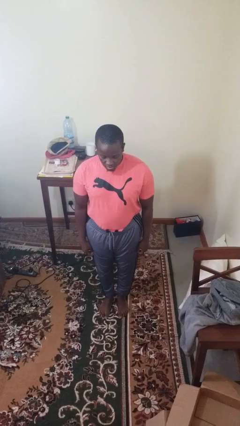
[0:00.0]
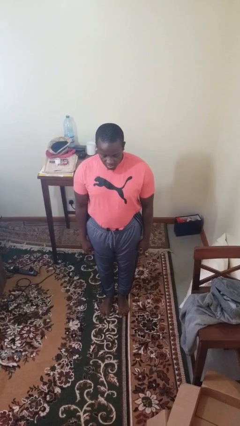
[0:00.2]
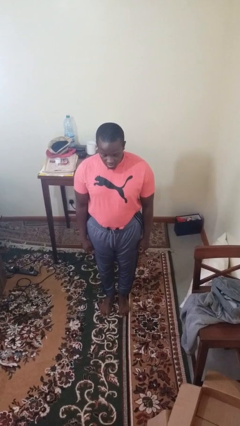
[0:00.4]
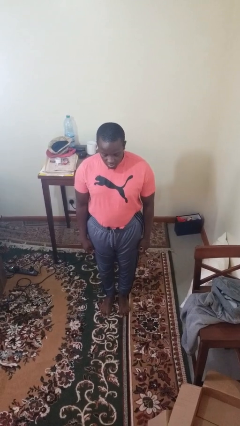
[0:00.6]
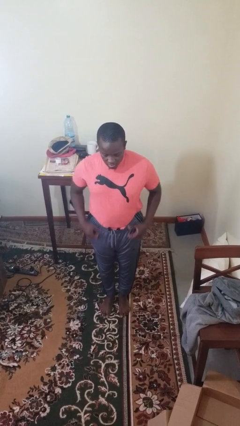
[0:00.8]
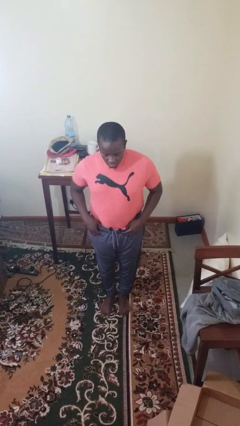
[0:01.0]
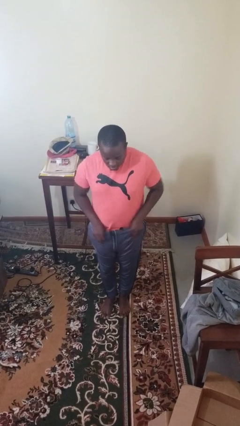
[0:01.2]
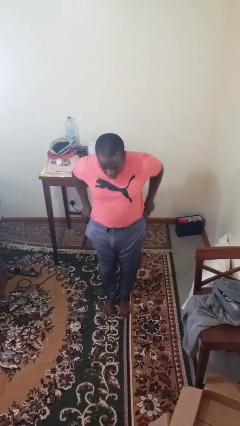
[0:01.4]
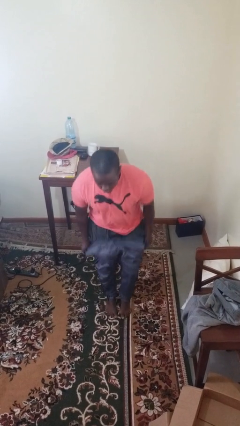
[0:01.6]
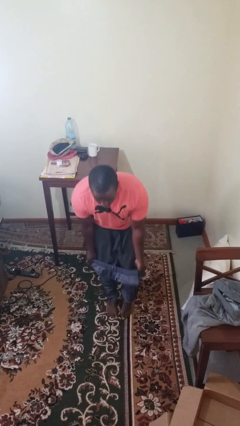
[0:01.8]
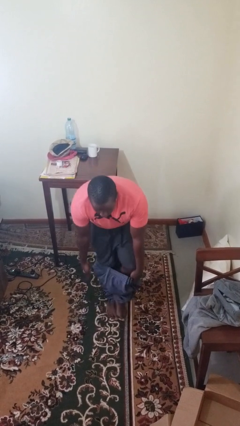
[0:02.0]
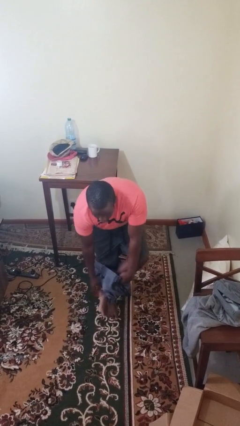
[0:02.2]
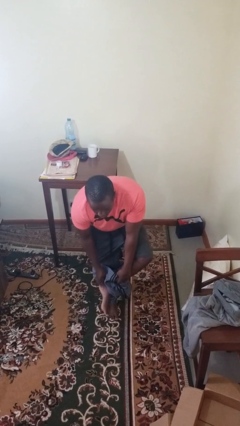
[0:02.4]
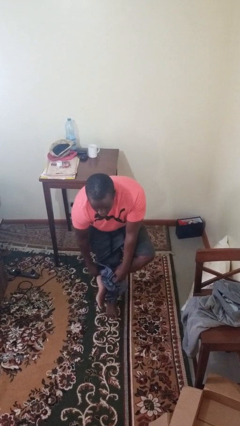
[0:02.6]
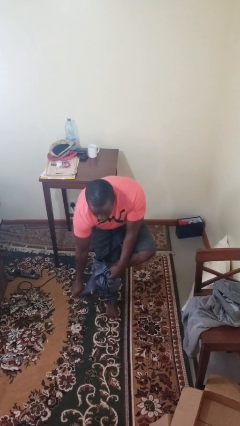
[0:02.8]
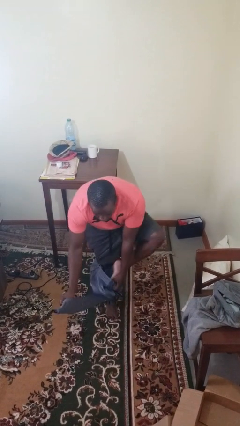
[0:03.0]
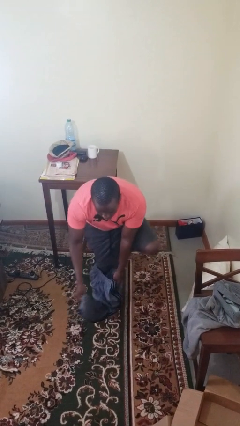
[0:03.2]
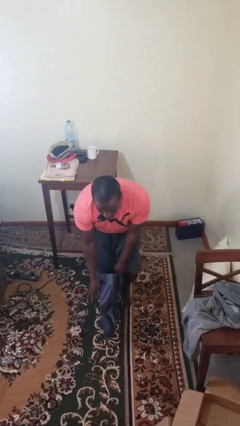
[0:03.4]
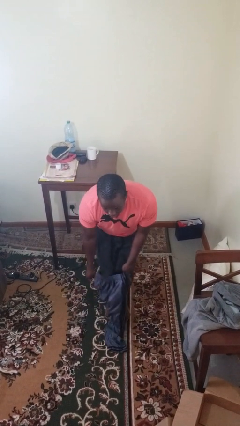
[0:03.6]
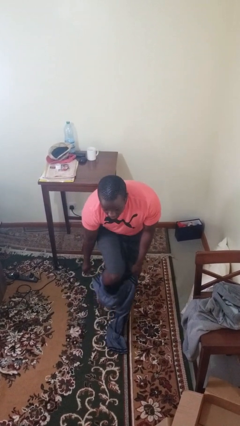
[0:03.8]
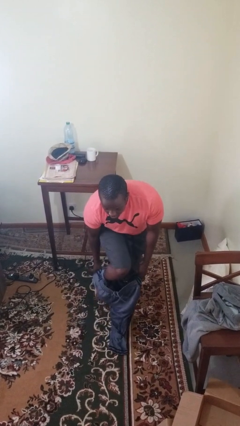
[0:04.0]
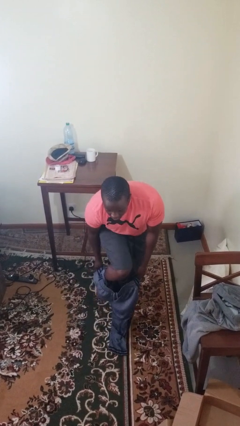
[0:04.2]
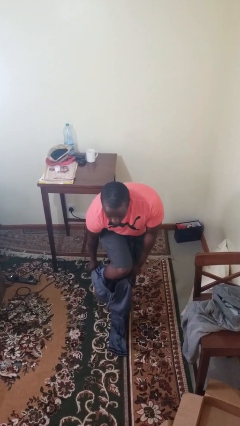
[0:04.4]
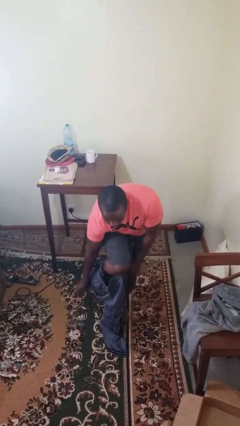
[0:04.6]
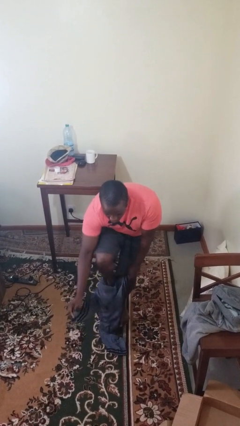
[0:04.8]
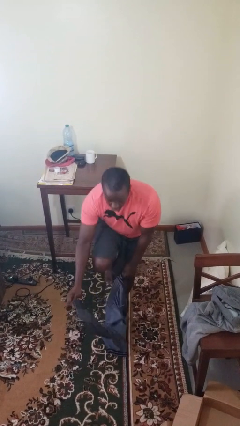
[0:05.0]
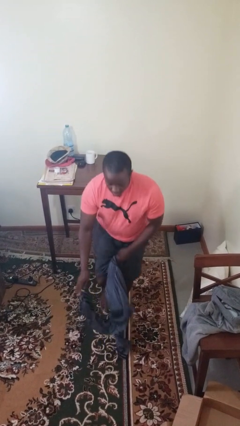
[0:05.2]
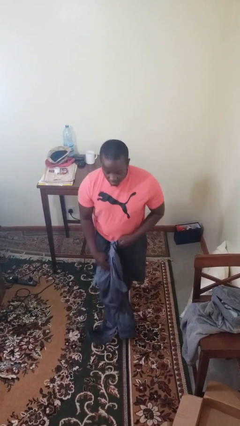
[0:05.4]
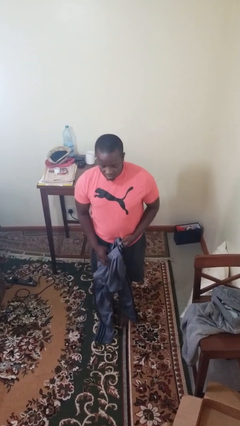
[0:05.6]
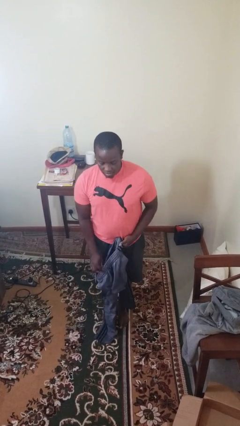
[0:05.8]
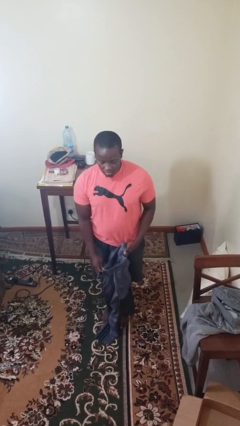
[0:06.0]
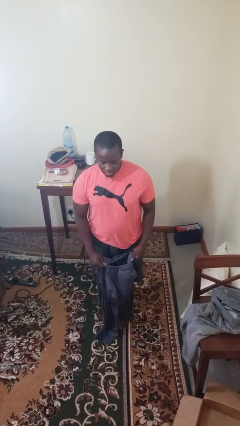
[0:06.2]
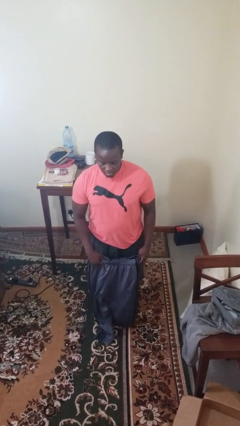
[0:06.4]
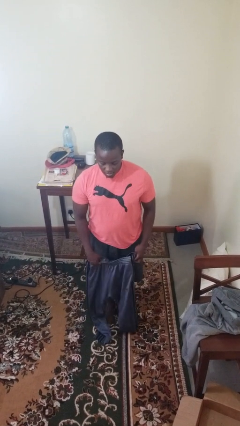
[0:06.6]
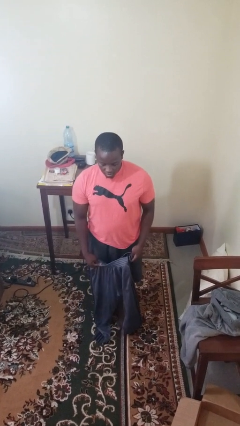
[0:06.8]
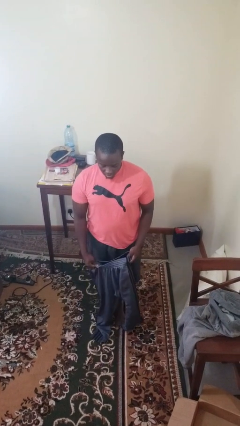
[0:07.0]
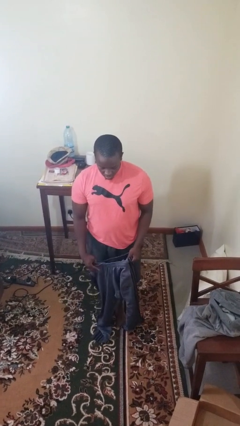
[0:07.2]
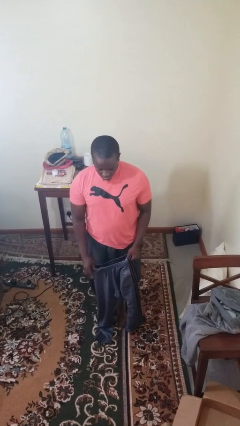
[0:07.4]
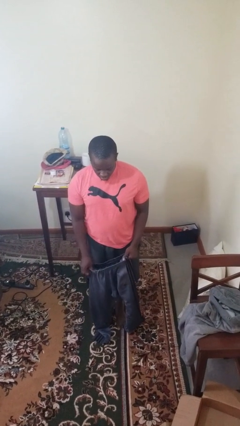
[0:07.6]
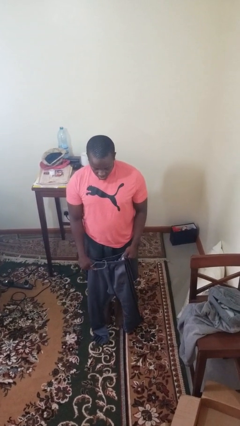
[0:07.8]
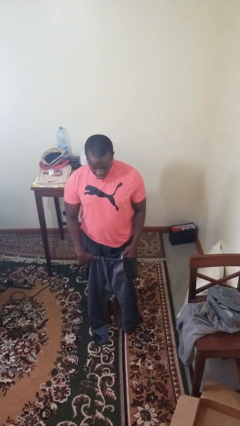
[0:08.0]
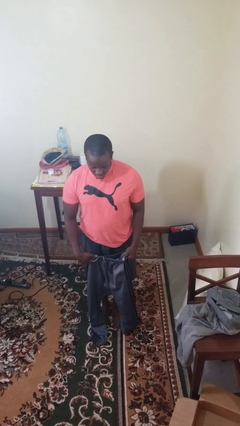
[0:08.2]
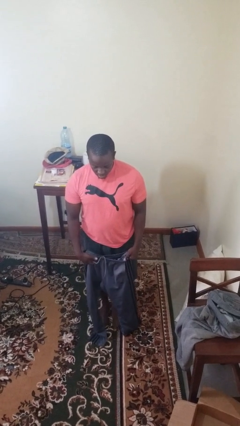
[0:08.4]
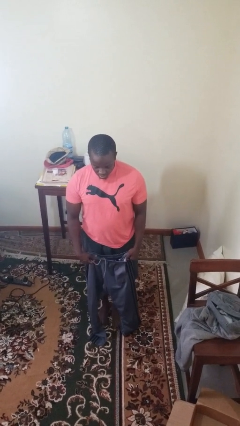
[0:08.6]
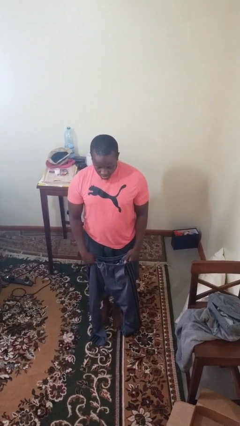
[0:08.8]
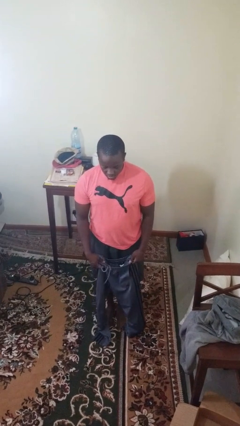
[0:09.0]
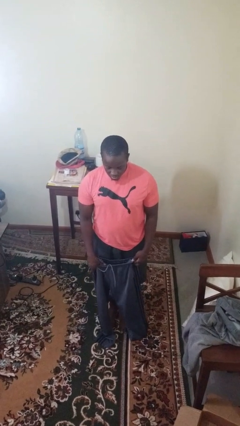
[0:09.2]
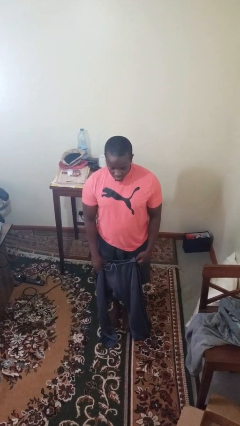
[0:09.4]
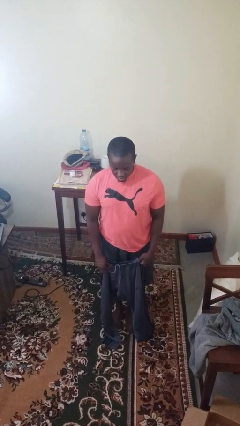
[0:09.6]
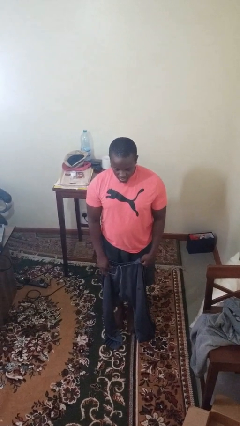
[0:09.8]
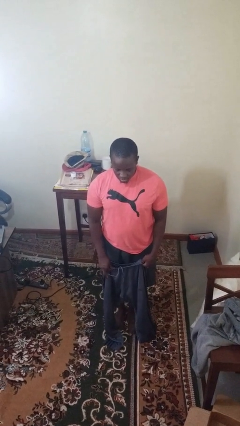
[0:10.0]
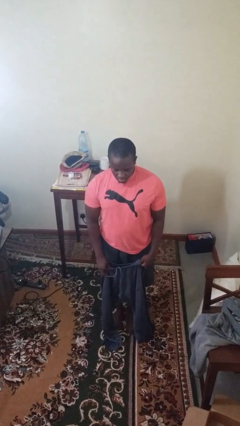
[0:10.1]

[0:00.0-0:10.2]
person takes off pants

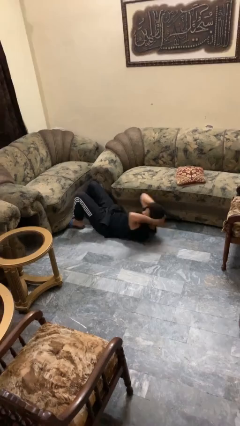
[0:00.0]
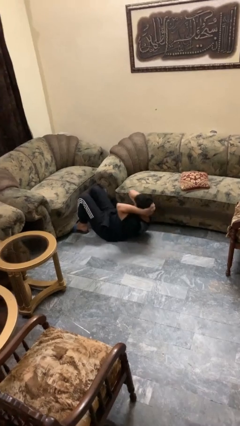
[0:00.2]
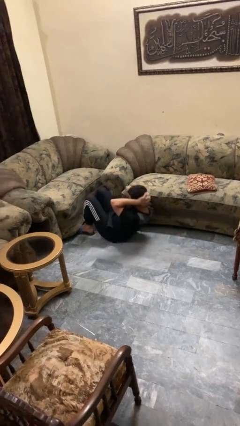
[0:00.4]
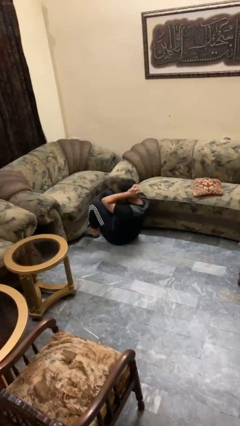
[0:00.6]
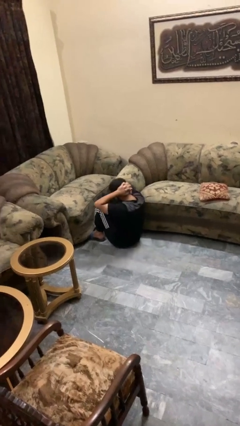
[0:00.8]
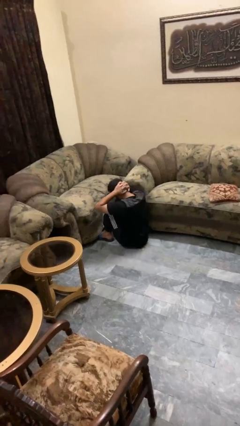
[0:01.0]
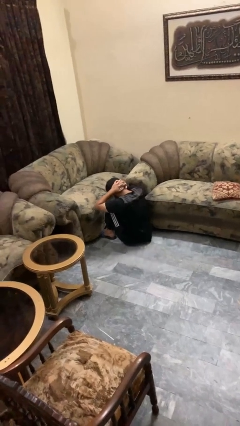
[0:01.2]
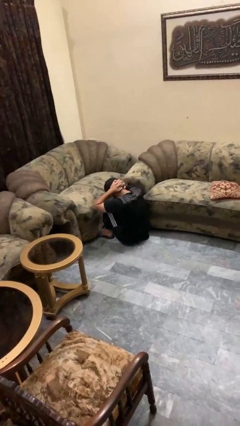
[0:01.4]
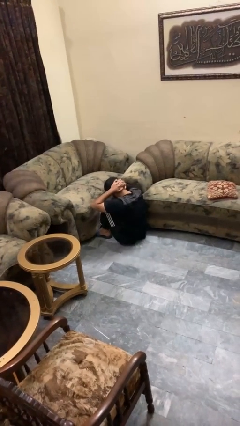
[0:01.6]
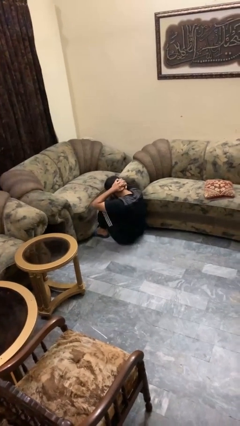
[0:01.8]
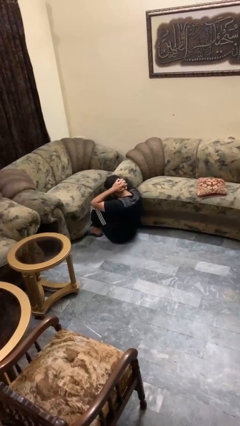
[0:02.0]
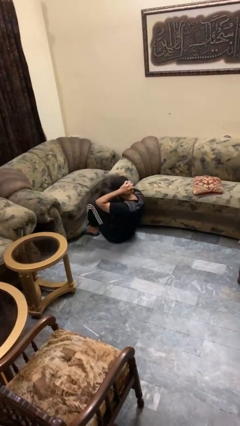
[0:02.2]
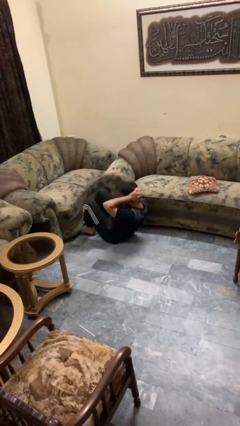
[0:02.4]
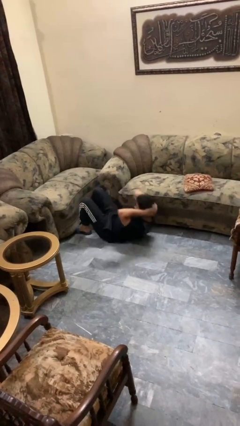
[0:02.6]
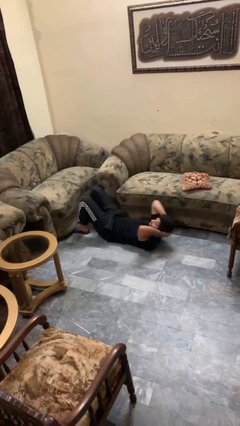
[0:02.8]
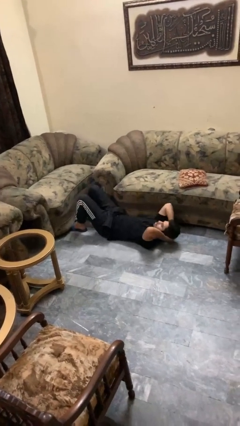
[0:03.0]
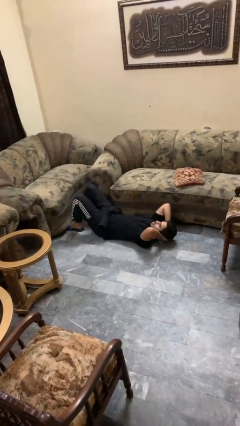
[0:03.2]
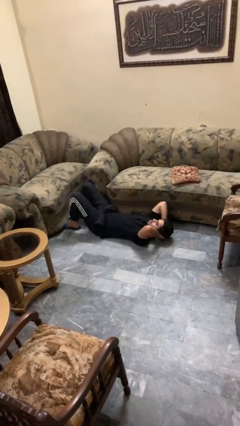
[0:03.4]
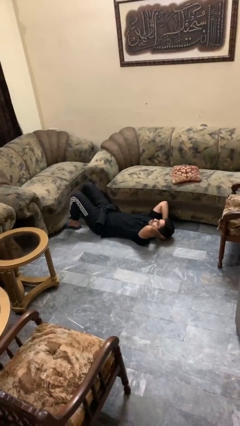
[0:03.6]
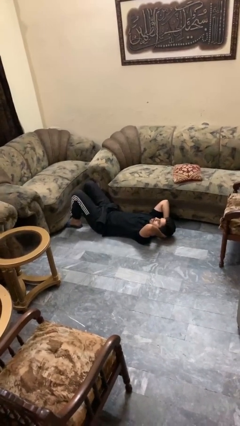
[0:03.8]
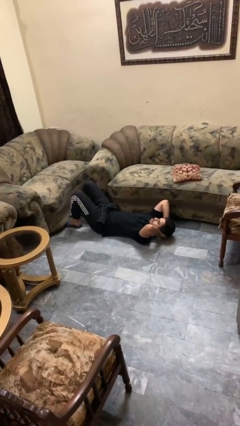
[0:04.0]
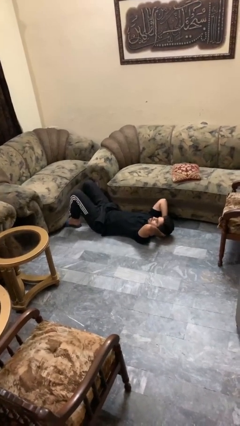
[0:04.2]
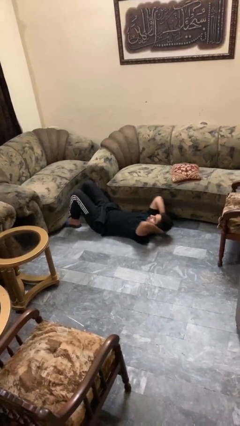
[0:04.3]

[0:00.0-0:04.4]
person exercises with situp

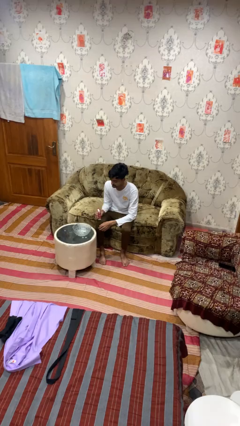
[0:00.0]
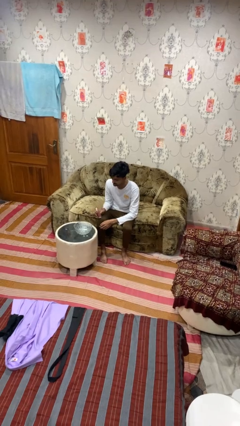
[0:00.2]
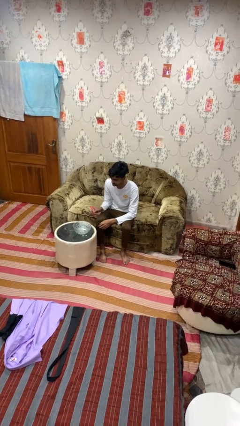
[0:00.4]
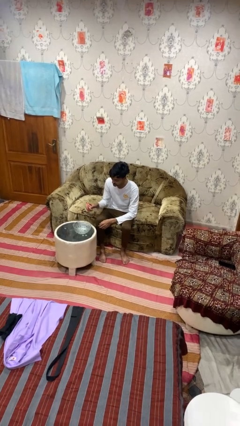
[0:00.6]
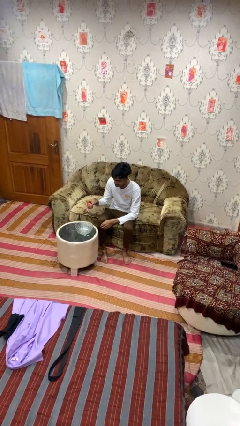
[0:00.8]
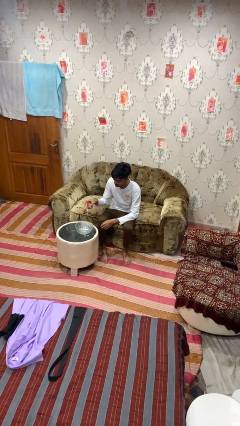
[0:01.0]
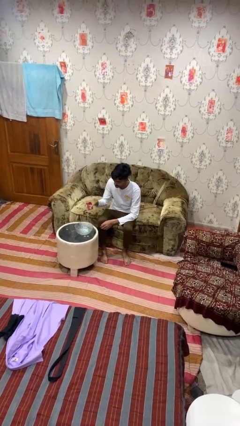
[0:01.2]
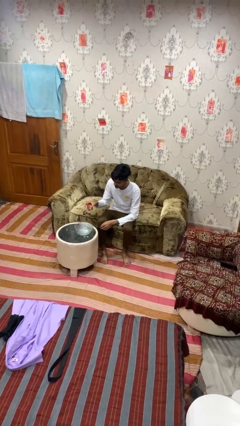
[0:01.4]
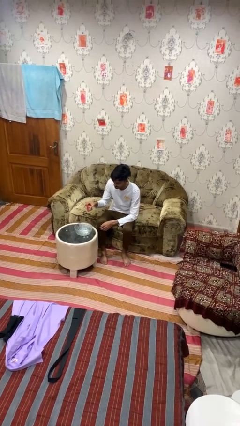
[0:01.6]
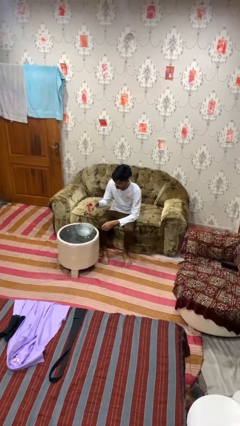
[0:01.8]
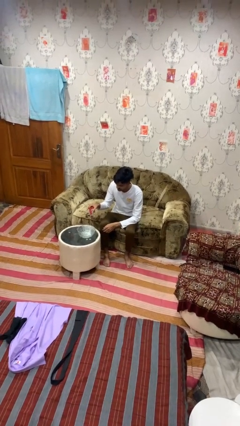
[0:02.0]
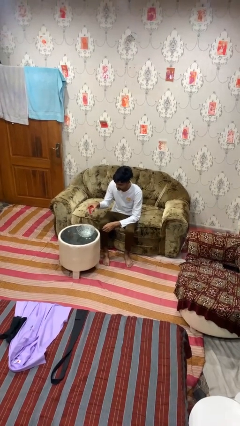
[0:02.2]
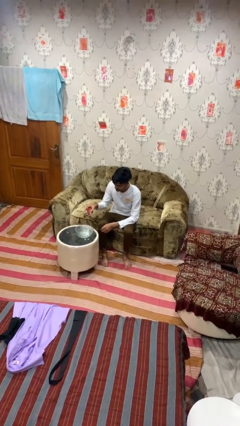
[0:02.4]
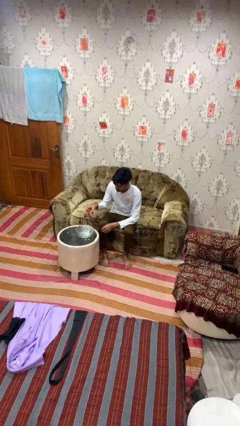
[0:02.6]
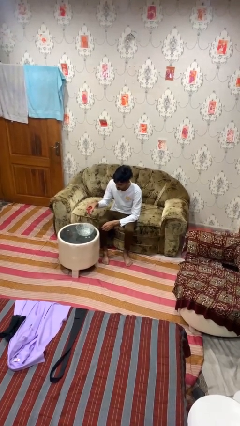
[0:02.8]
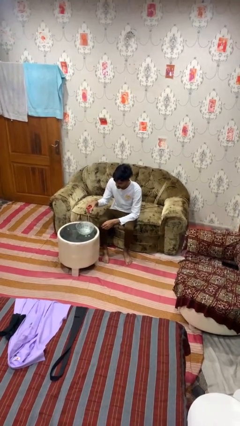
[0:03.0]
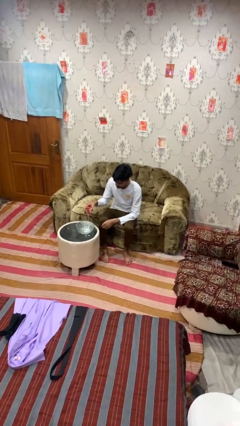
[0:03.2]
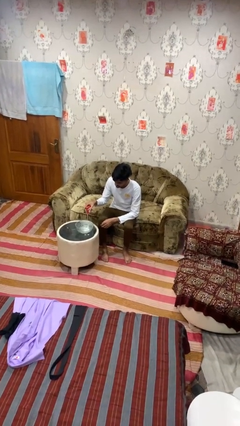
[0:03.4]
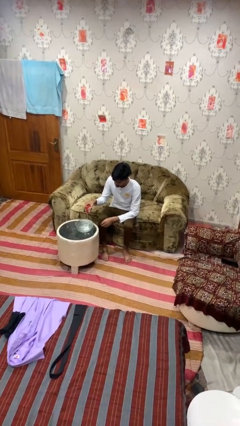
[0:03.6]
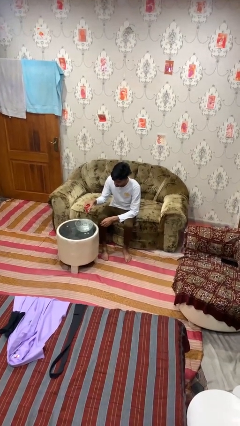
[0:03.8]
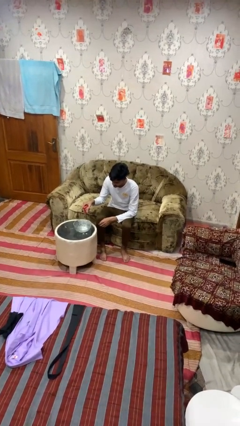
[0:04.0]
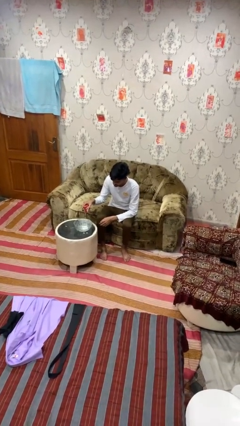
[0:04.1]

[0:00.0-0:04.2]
person pours into bowl
